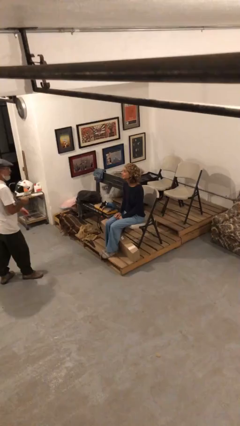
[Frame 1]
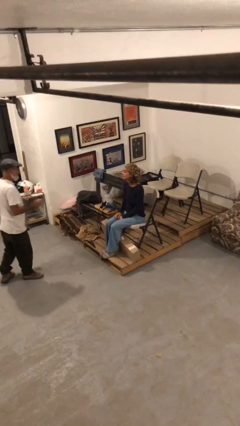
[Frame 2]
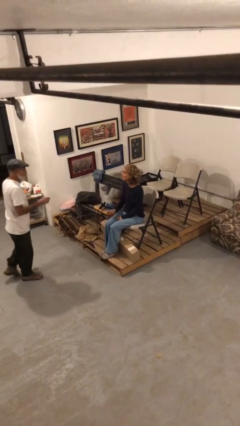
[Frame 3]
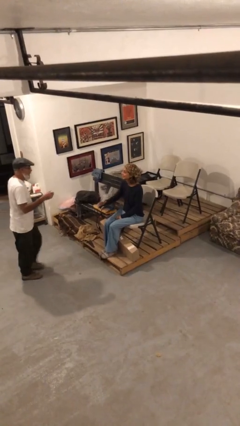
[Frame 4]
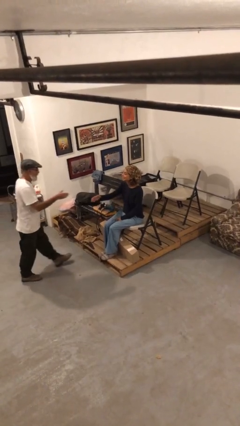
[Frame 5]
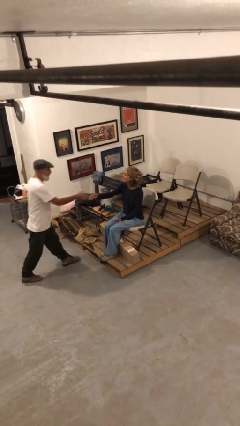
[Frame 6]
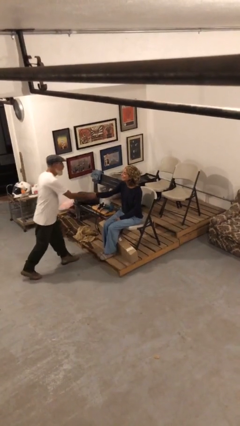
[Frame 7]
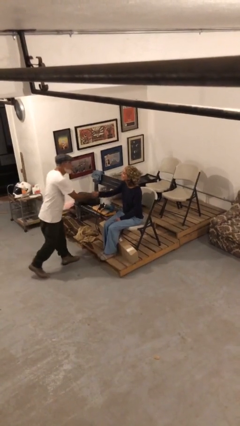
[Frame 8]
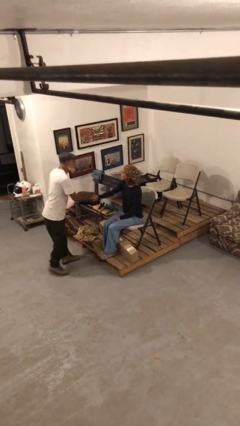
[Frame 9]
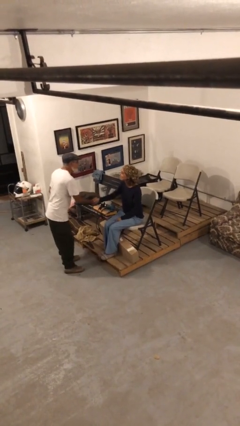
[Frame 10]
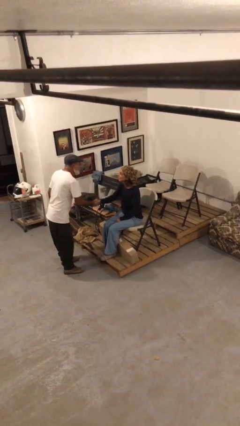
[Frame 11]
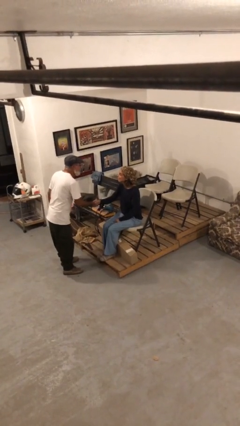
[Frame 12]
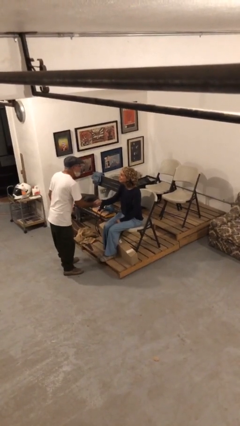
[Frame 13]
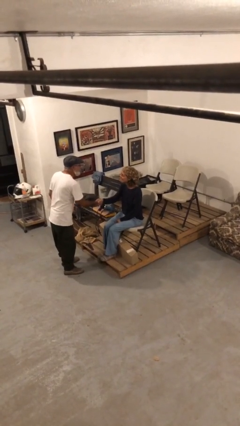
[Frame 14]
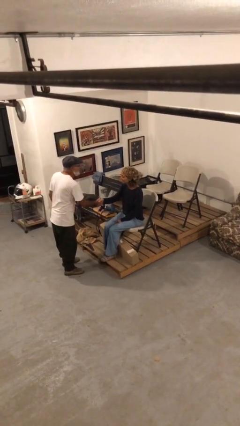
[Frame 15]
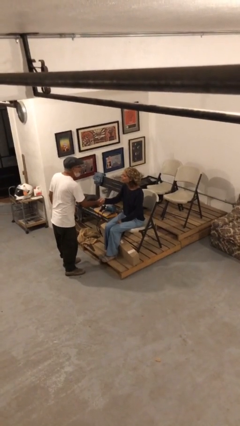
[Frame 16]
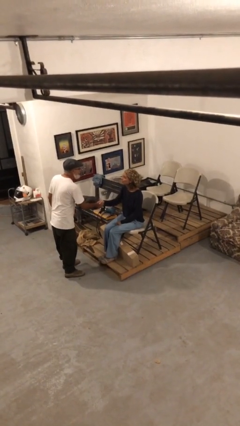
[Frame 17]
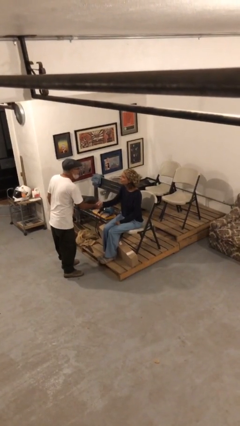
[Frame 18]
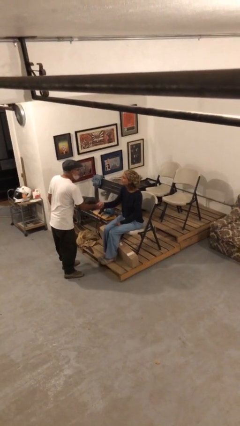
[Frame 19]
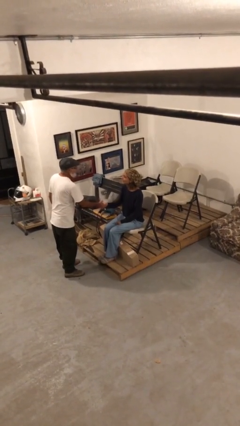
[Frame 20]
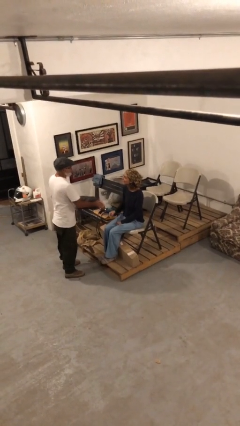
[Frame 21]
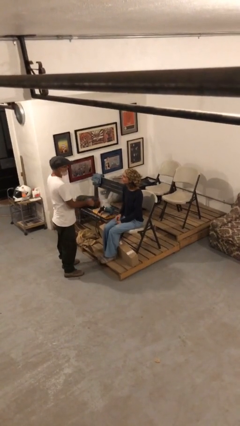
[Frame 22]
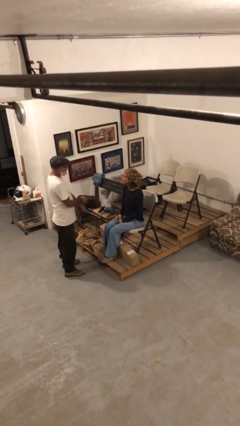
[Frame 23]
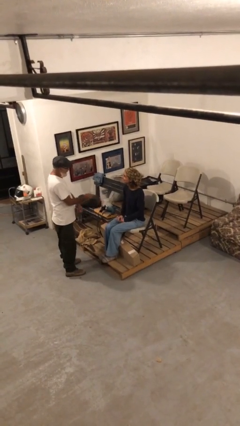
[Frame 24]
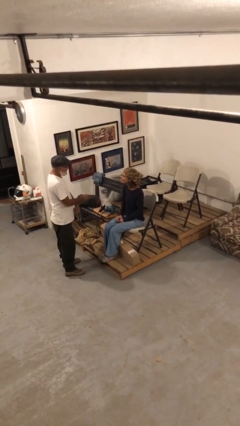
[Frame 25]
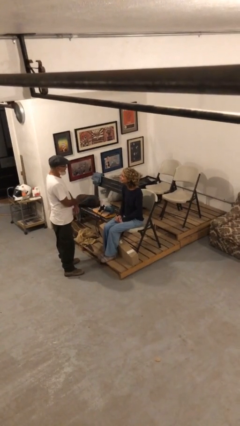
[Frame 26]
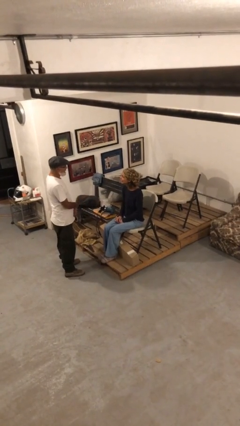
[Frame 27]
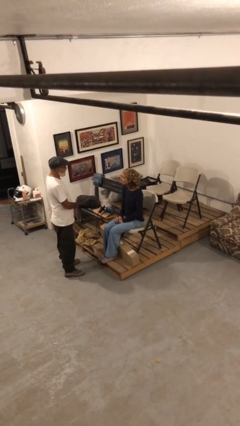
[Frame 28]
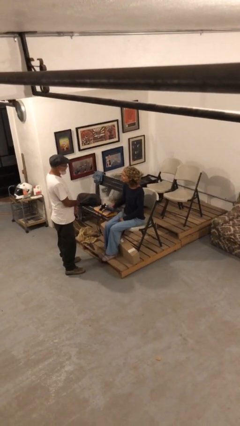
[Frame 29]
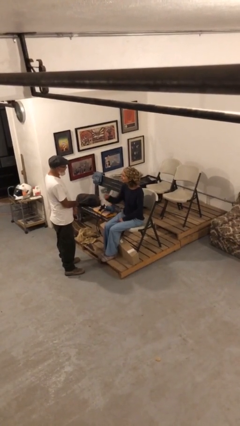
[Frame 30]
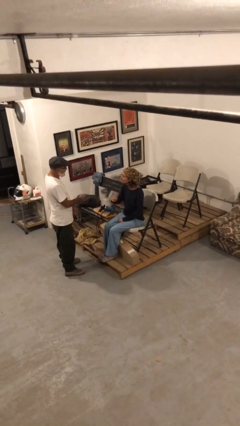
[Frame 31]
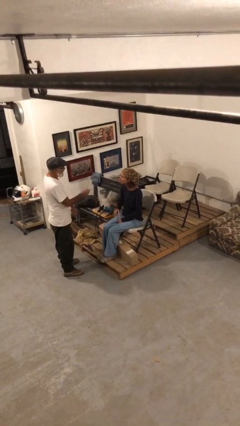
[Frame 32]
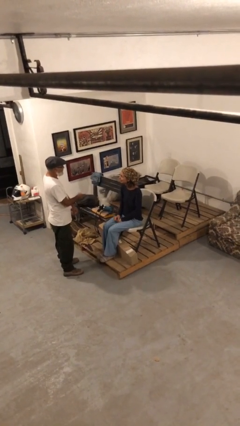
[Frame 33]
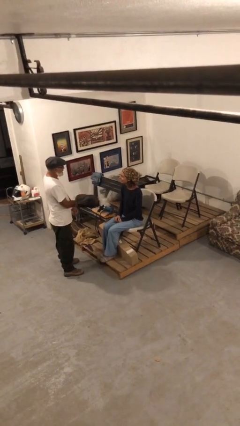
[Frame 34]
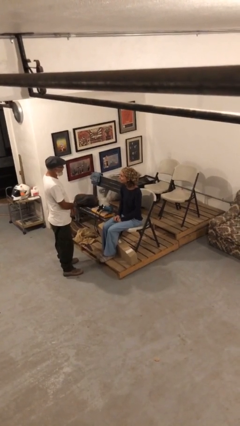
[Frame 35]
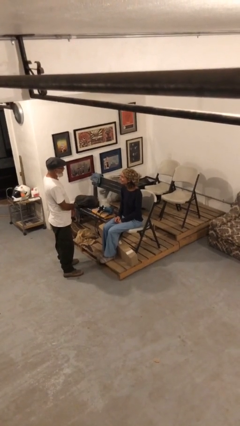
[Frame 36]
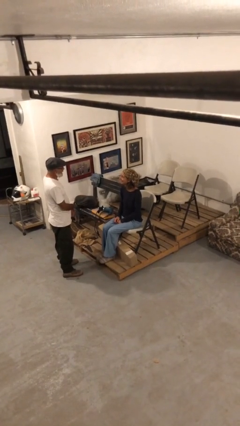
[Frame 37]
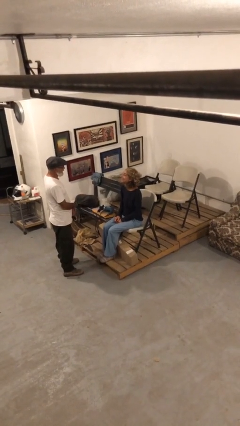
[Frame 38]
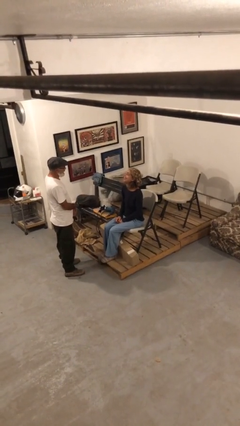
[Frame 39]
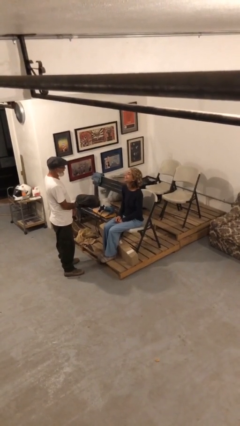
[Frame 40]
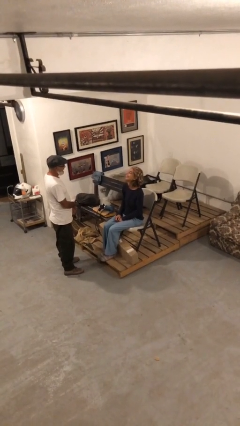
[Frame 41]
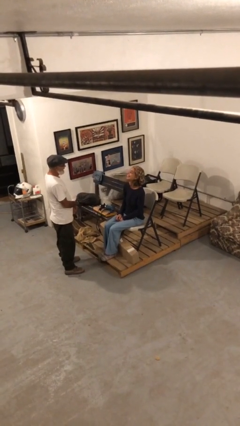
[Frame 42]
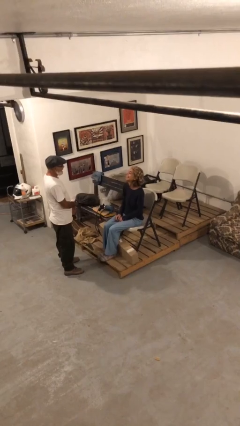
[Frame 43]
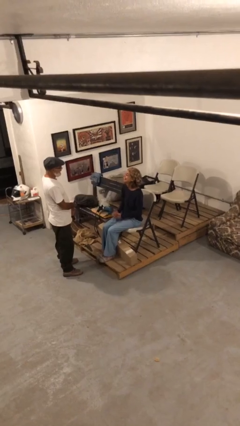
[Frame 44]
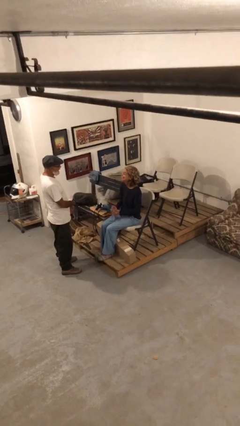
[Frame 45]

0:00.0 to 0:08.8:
person shakes hand

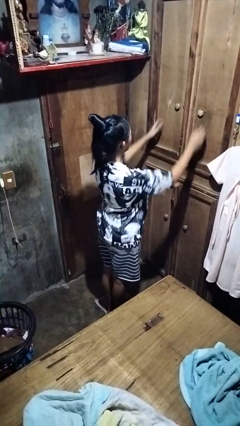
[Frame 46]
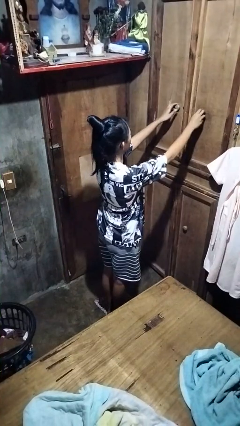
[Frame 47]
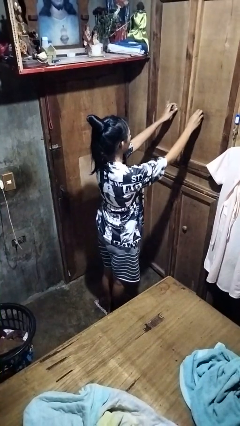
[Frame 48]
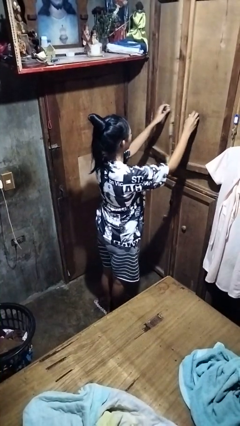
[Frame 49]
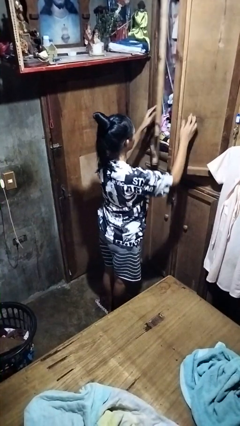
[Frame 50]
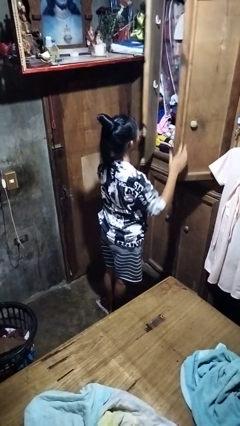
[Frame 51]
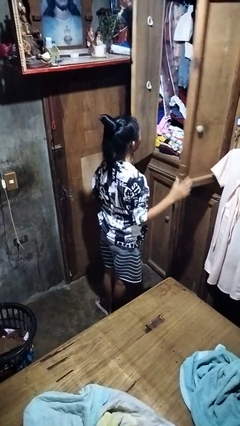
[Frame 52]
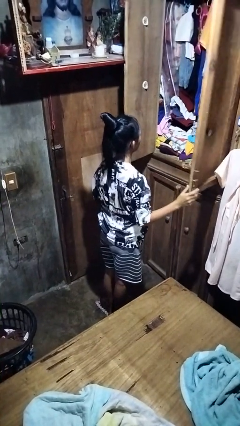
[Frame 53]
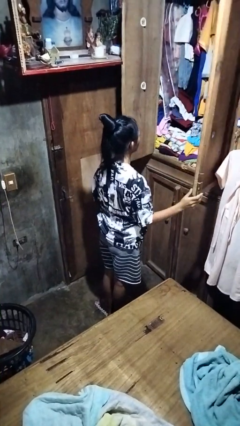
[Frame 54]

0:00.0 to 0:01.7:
person opens closet door

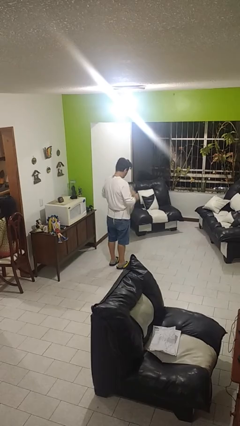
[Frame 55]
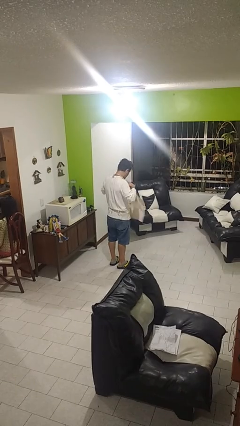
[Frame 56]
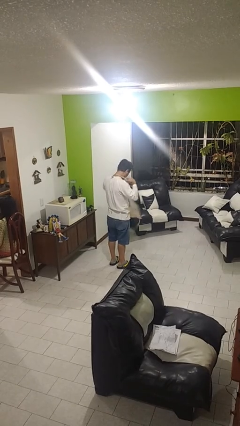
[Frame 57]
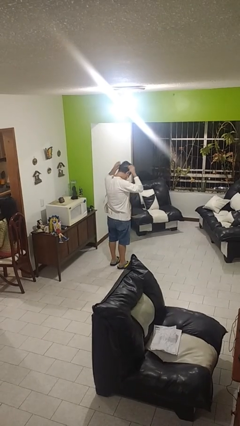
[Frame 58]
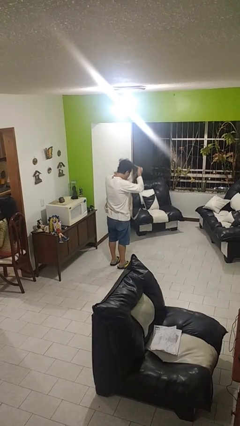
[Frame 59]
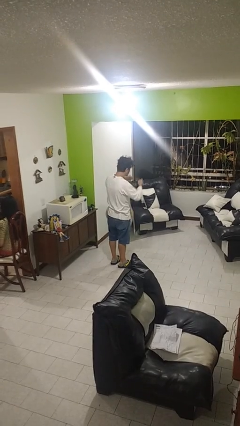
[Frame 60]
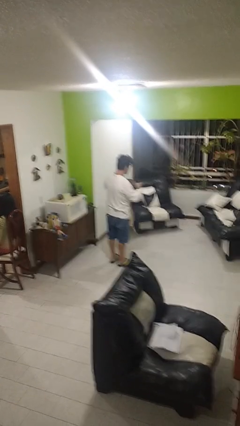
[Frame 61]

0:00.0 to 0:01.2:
person takes off apron

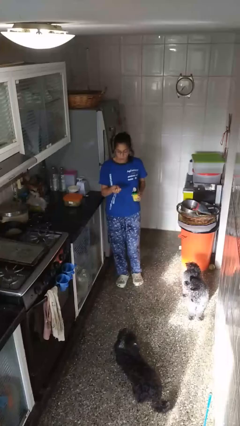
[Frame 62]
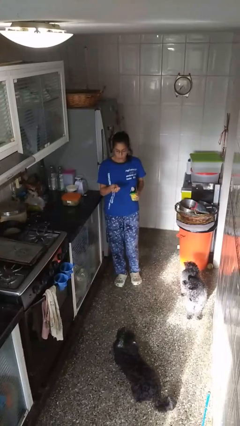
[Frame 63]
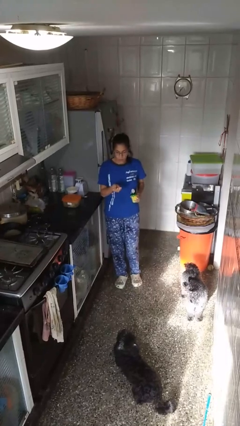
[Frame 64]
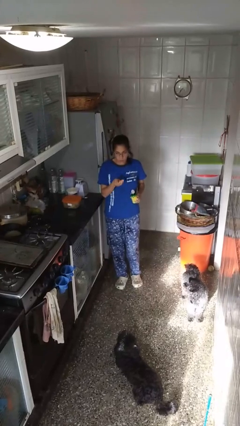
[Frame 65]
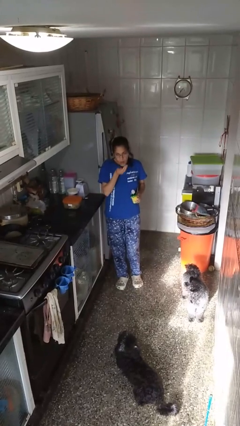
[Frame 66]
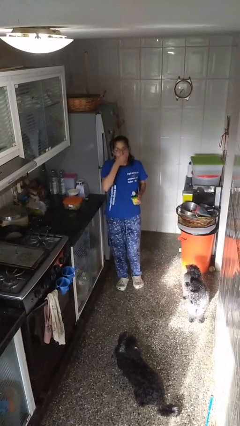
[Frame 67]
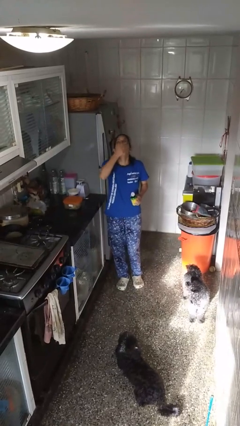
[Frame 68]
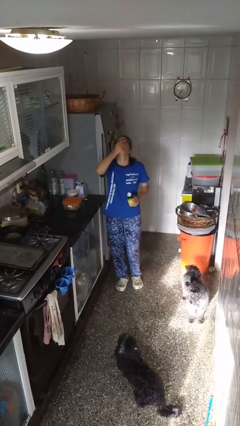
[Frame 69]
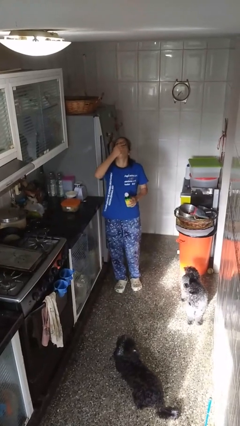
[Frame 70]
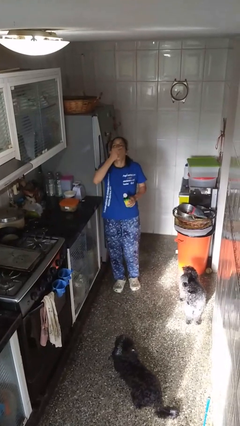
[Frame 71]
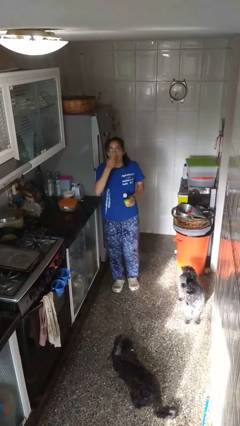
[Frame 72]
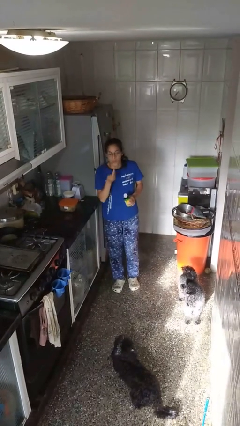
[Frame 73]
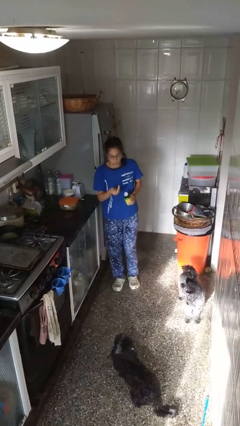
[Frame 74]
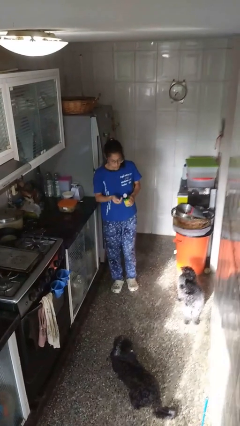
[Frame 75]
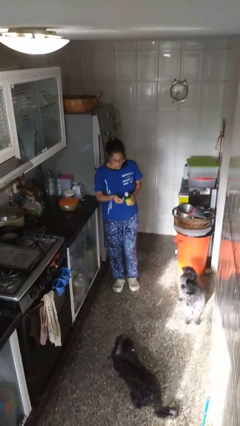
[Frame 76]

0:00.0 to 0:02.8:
person drinks from cup

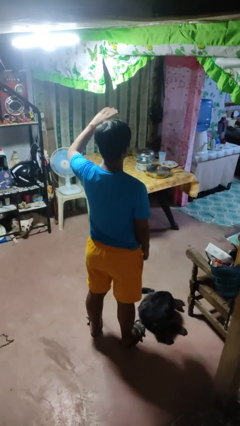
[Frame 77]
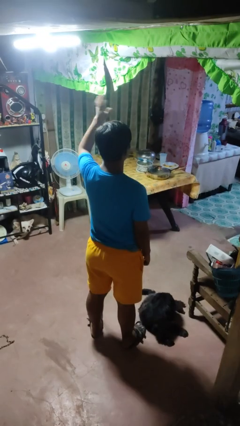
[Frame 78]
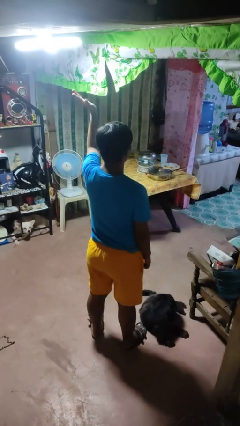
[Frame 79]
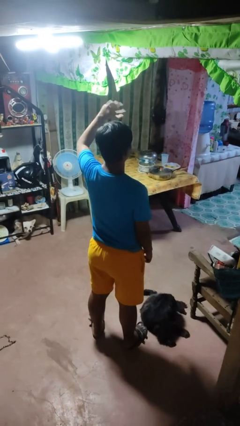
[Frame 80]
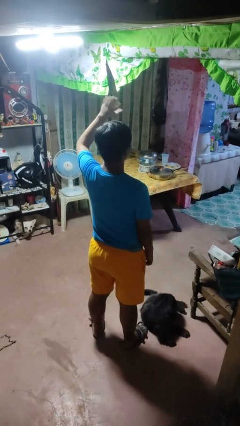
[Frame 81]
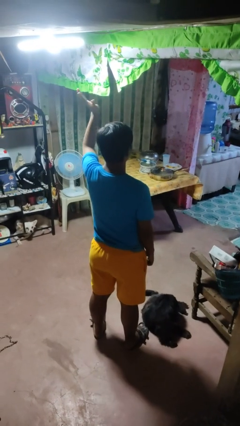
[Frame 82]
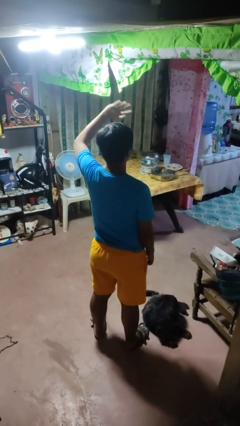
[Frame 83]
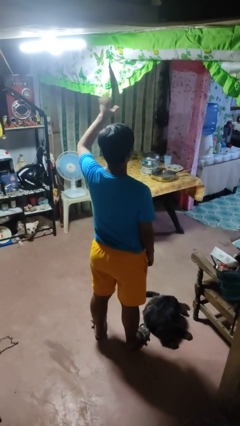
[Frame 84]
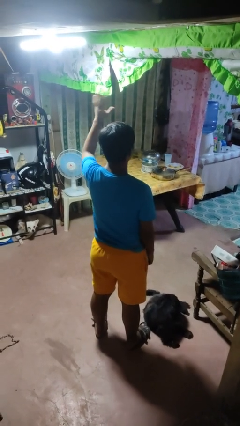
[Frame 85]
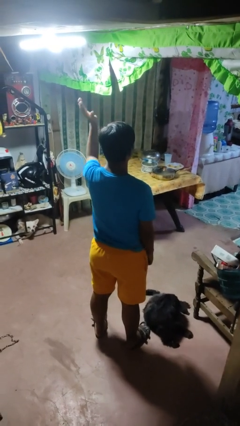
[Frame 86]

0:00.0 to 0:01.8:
person waves at person

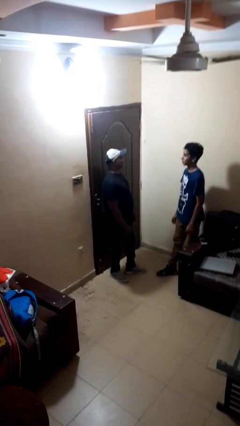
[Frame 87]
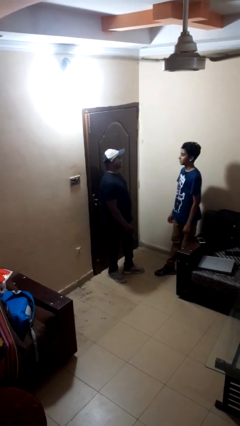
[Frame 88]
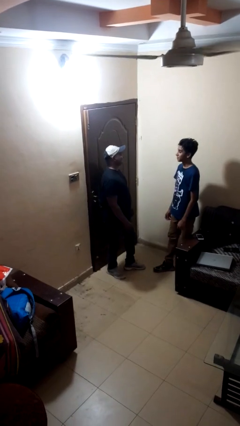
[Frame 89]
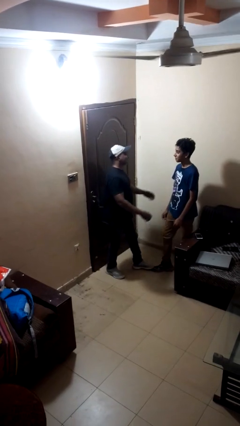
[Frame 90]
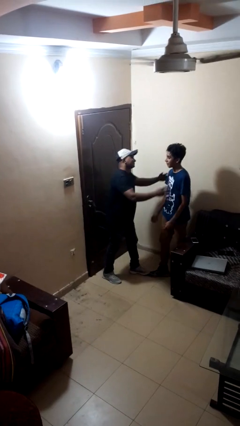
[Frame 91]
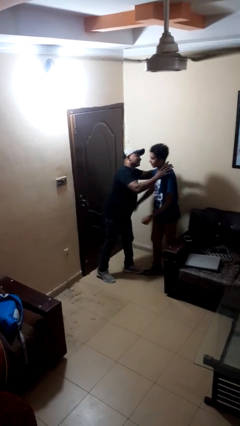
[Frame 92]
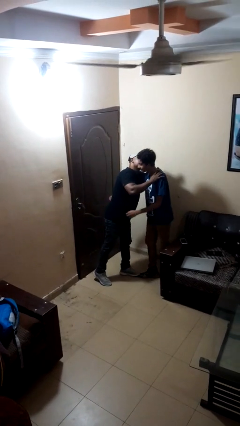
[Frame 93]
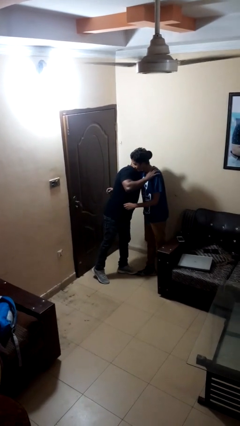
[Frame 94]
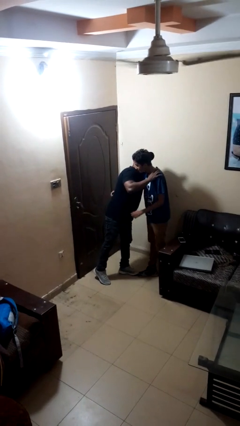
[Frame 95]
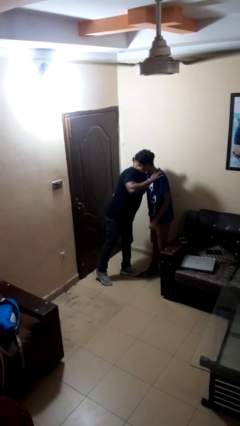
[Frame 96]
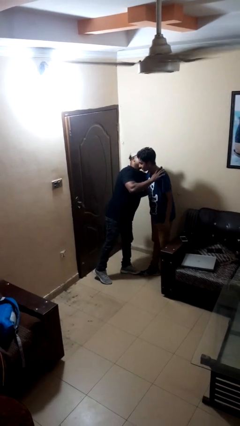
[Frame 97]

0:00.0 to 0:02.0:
person kisses cheek of person
